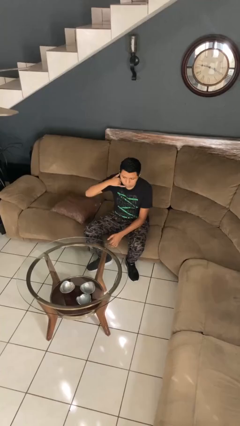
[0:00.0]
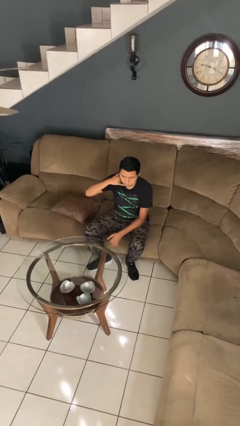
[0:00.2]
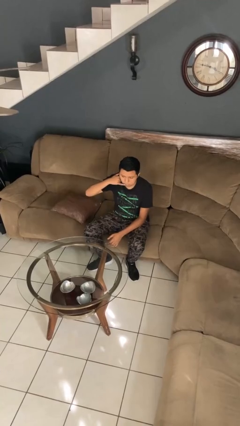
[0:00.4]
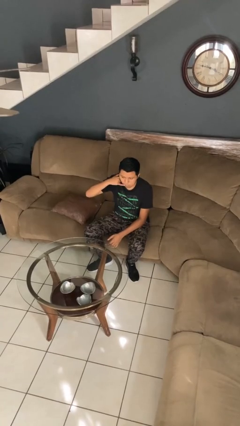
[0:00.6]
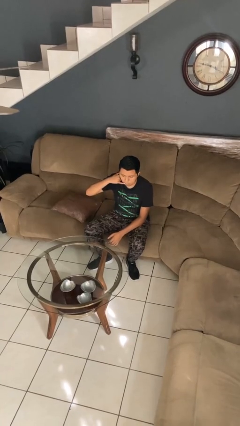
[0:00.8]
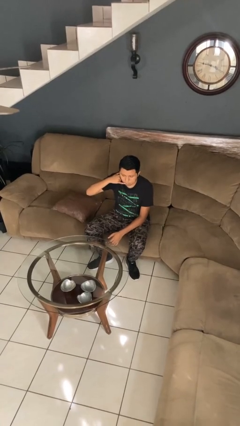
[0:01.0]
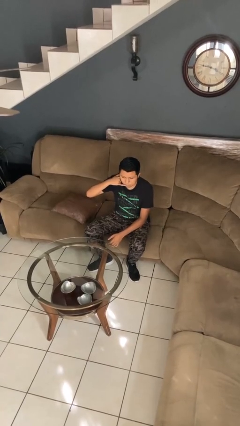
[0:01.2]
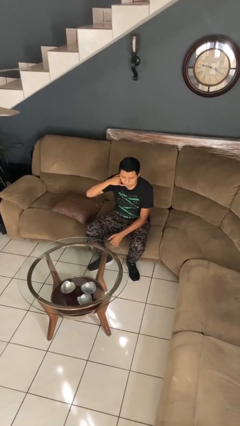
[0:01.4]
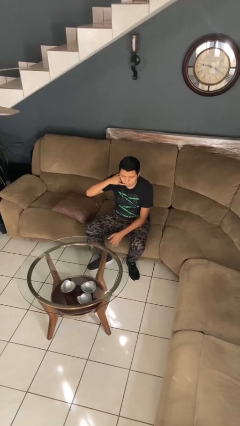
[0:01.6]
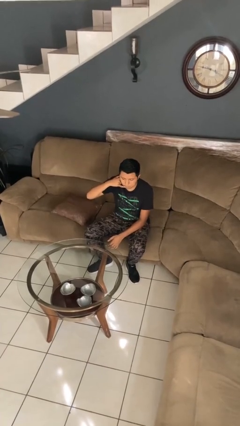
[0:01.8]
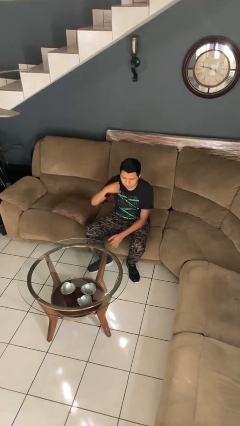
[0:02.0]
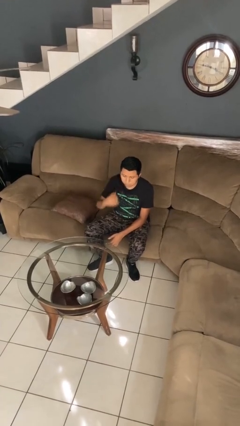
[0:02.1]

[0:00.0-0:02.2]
person gestures call me

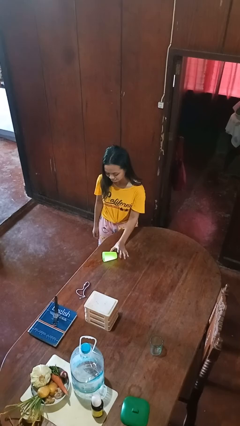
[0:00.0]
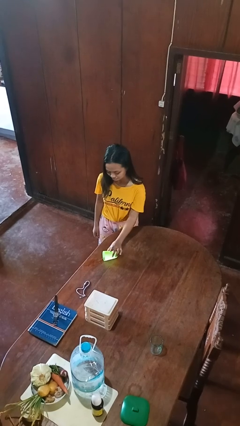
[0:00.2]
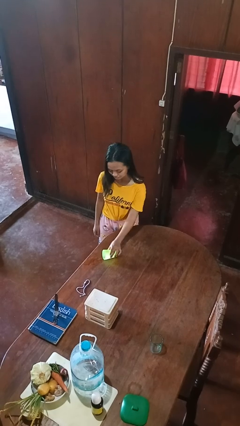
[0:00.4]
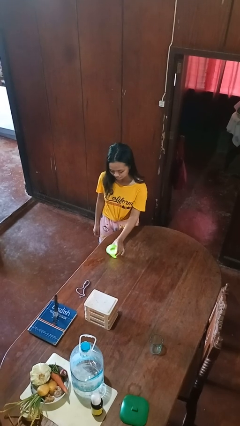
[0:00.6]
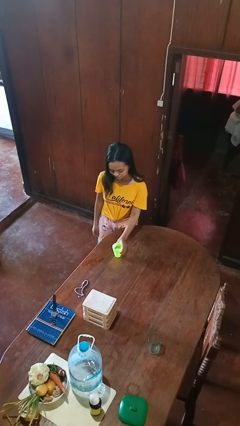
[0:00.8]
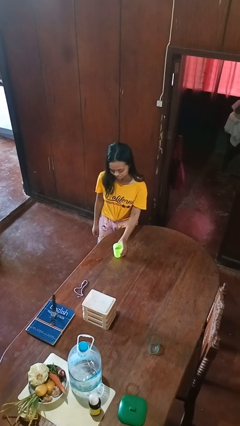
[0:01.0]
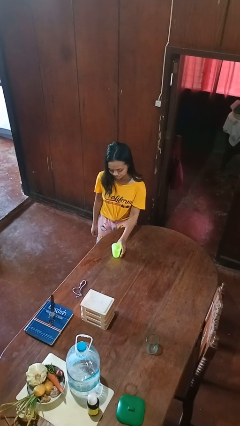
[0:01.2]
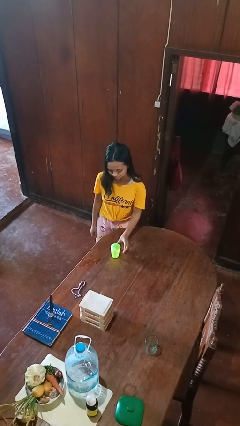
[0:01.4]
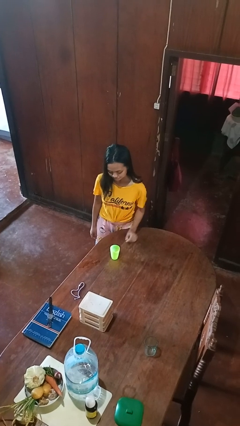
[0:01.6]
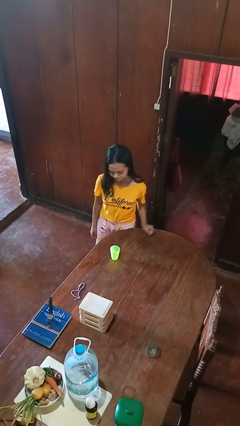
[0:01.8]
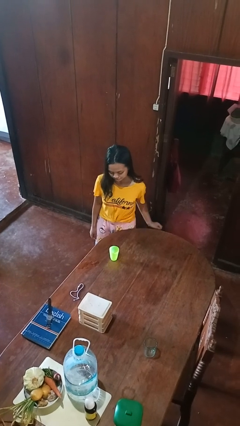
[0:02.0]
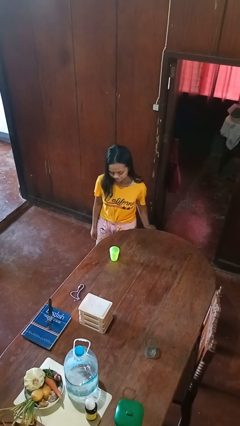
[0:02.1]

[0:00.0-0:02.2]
person sets upright glass

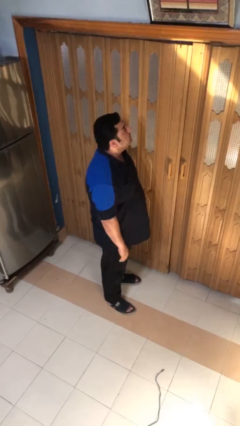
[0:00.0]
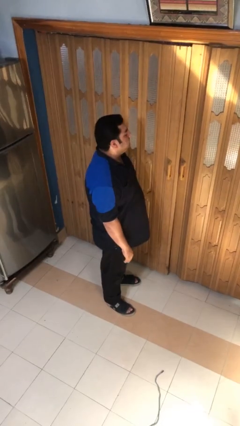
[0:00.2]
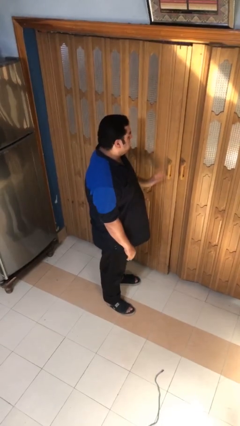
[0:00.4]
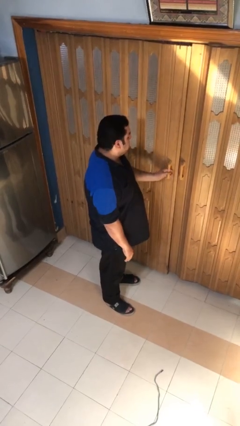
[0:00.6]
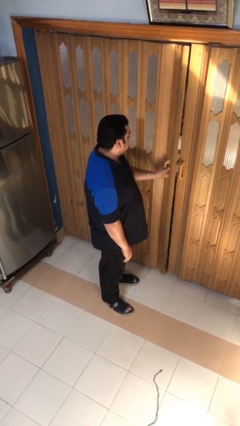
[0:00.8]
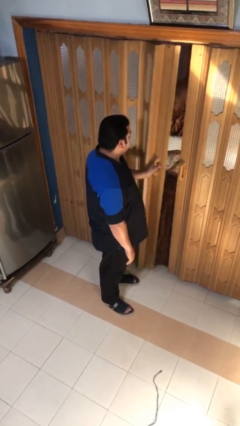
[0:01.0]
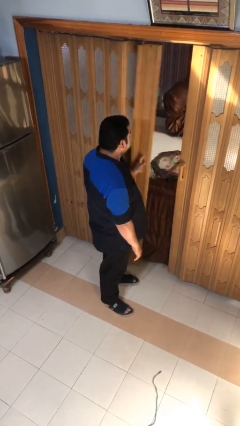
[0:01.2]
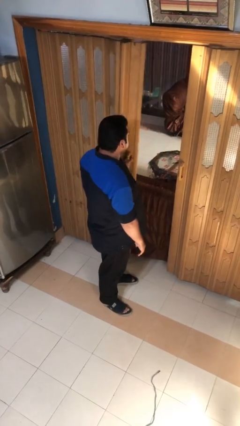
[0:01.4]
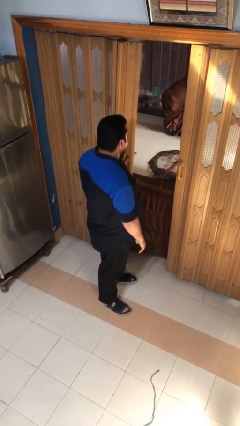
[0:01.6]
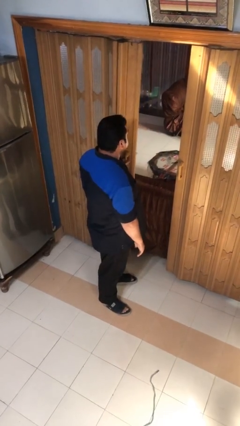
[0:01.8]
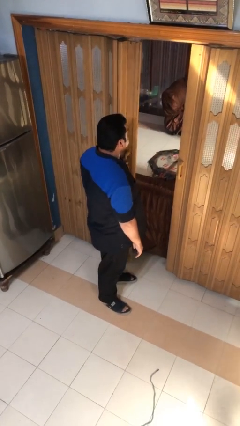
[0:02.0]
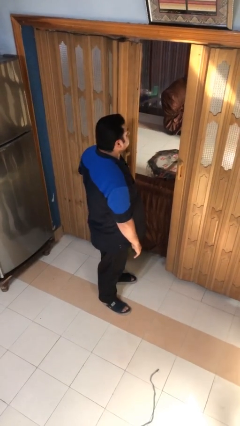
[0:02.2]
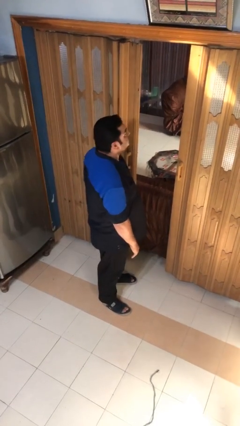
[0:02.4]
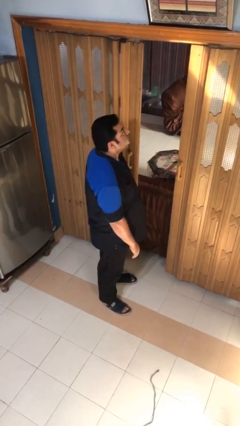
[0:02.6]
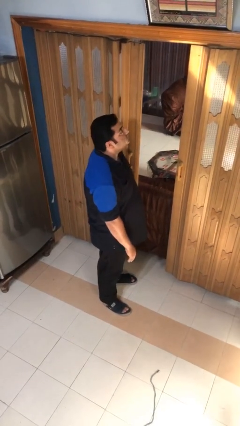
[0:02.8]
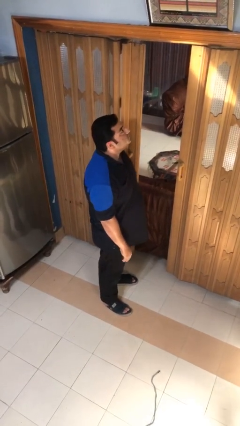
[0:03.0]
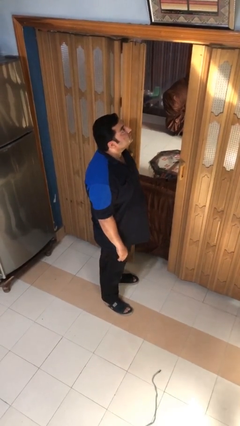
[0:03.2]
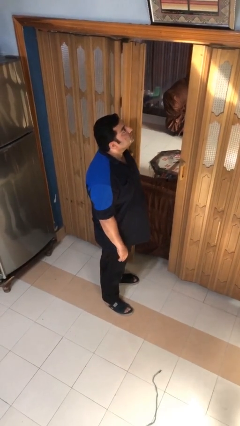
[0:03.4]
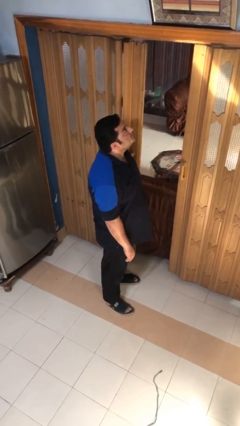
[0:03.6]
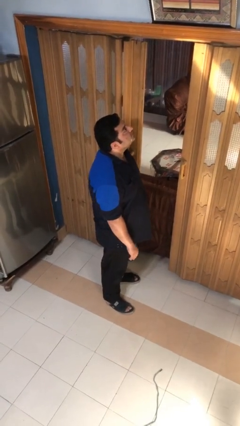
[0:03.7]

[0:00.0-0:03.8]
person opens sliding door

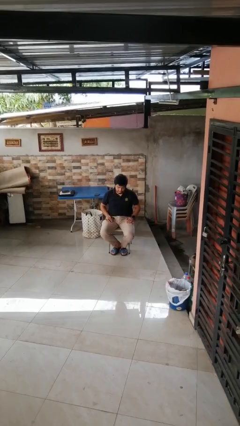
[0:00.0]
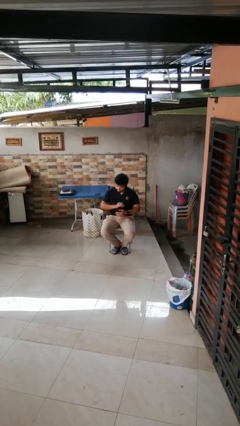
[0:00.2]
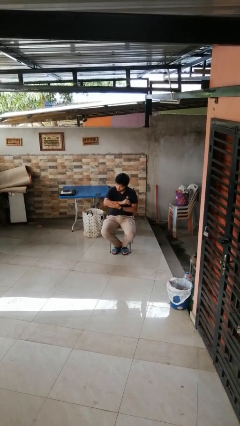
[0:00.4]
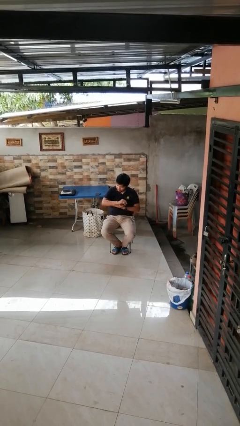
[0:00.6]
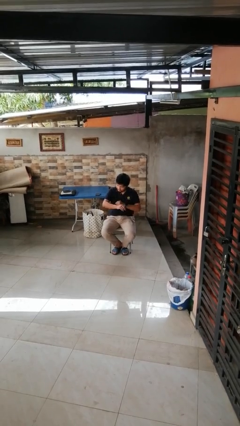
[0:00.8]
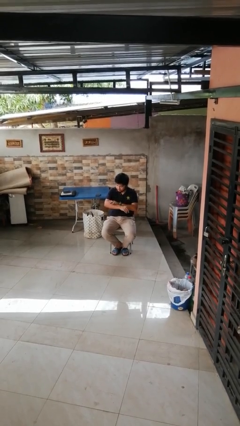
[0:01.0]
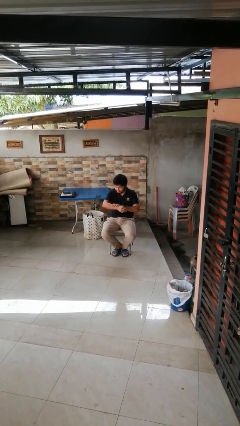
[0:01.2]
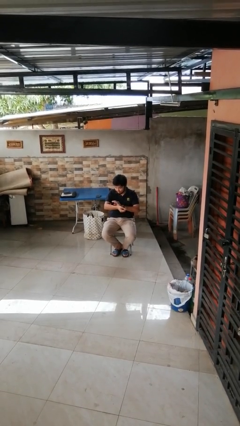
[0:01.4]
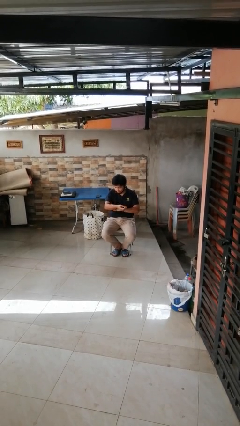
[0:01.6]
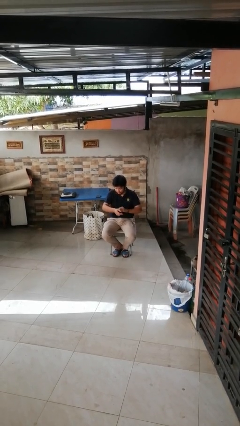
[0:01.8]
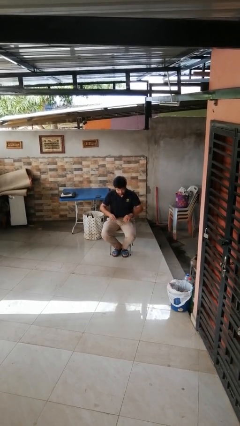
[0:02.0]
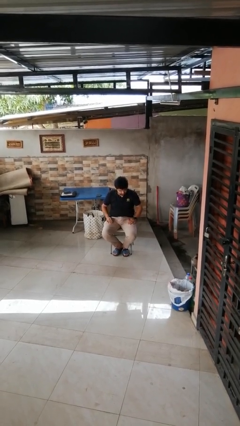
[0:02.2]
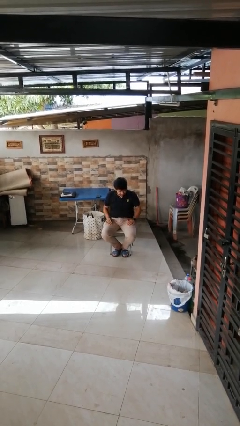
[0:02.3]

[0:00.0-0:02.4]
person looks at hands in lap

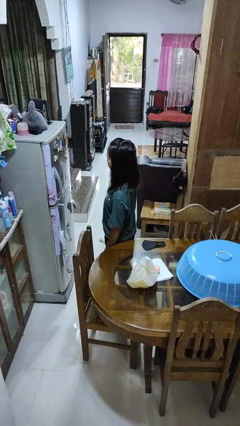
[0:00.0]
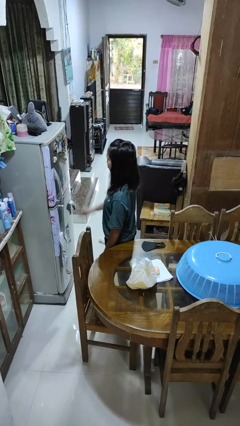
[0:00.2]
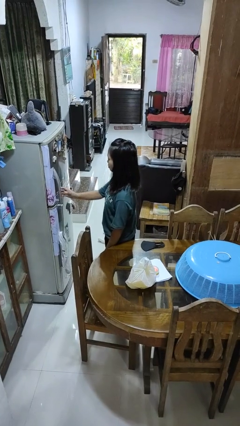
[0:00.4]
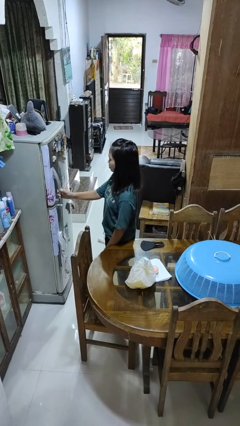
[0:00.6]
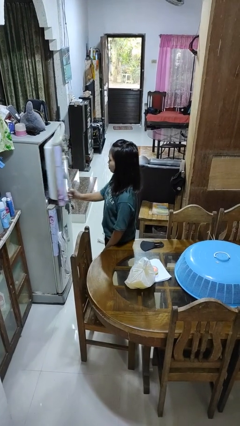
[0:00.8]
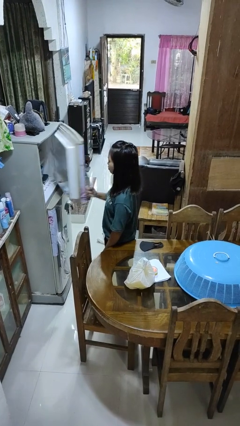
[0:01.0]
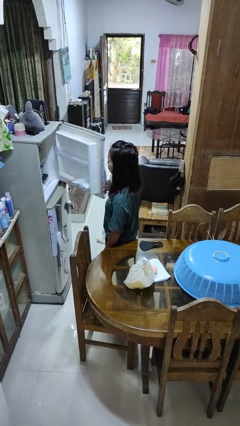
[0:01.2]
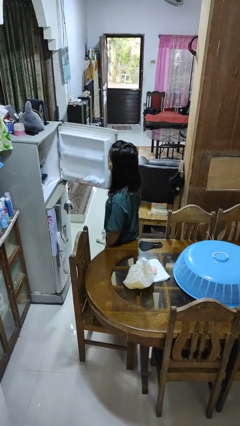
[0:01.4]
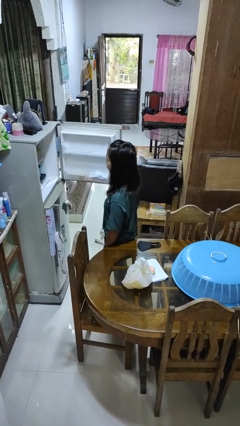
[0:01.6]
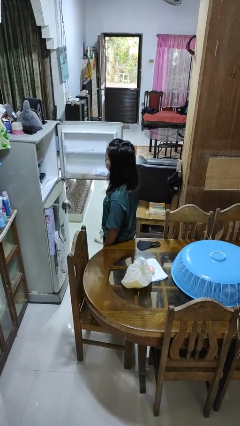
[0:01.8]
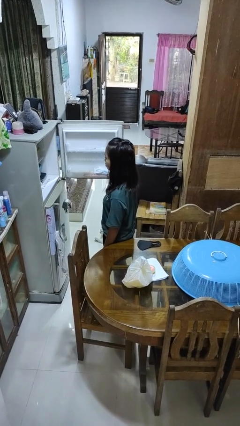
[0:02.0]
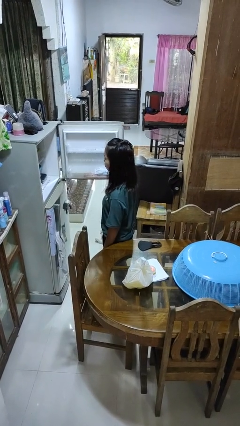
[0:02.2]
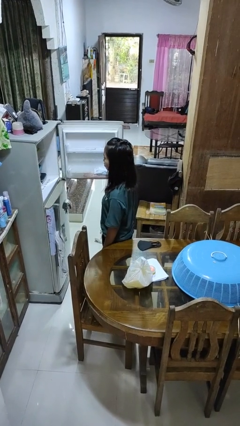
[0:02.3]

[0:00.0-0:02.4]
person opens refrigerator

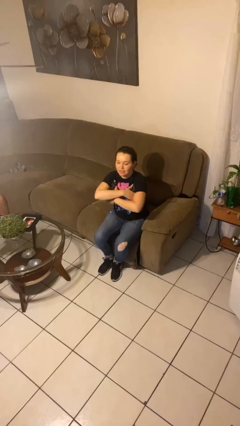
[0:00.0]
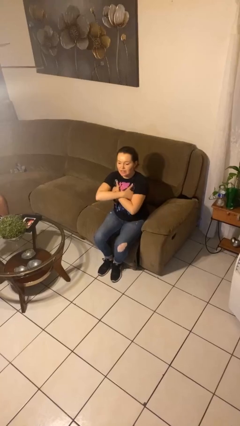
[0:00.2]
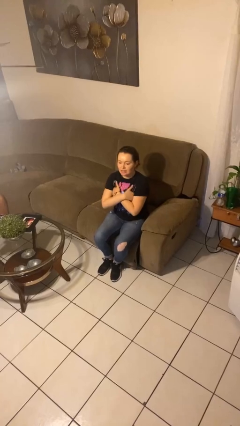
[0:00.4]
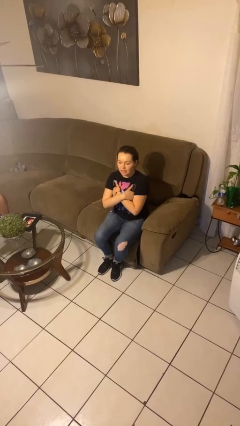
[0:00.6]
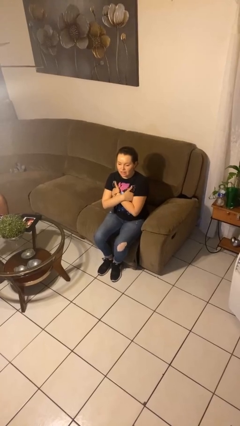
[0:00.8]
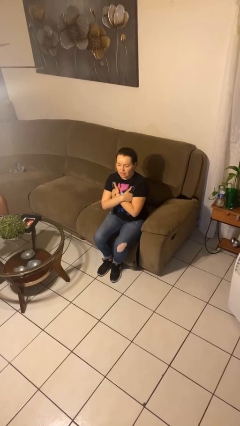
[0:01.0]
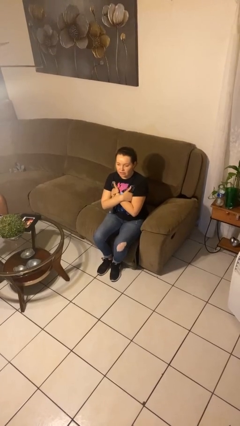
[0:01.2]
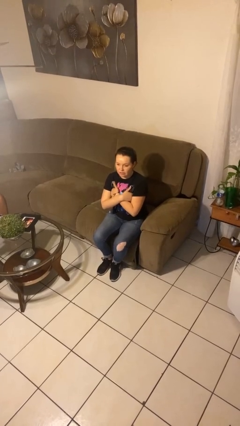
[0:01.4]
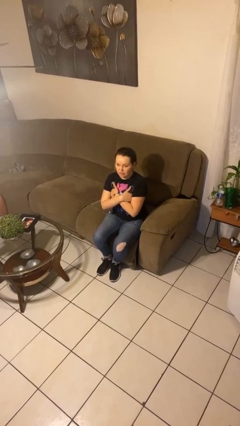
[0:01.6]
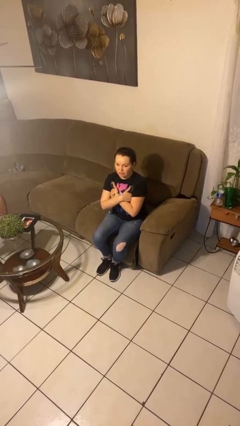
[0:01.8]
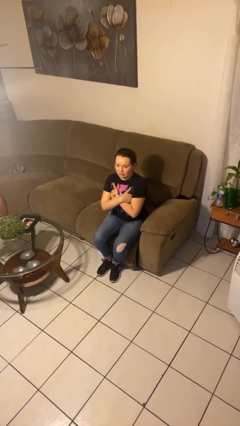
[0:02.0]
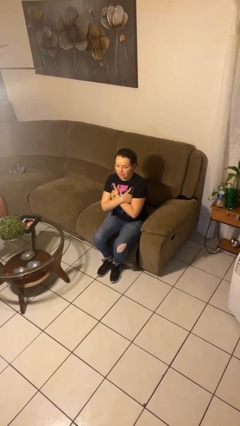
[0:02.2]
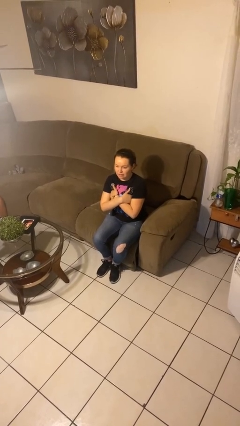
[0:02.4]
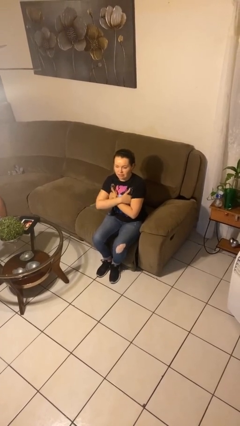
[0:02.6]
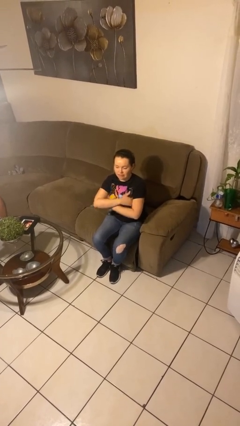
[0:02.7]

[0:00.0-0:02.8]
person gestures arms x

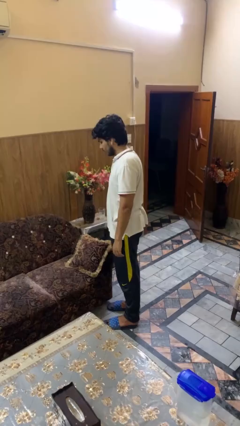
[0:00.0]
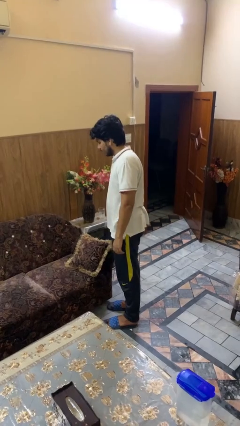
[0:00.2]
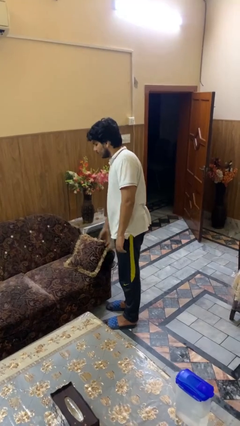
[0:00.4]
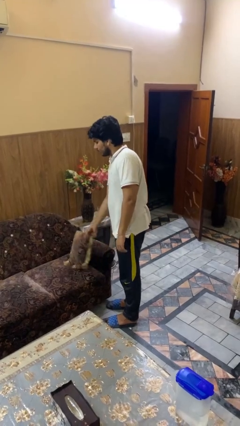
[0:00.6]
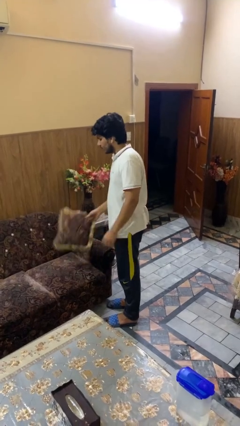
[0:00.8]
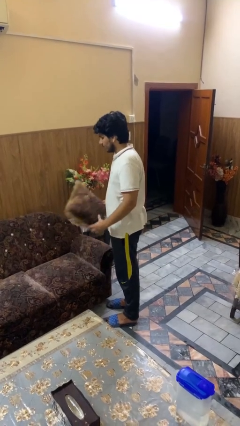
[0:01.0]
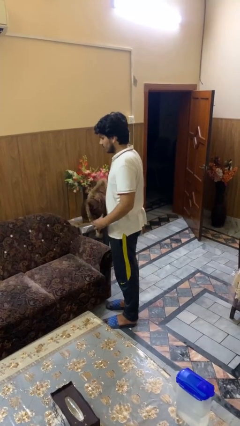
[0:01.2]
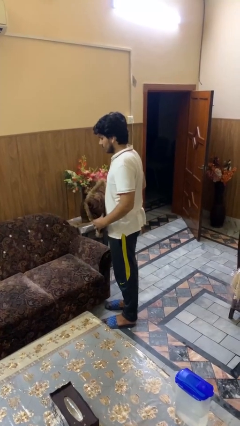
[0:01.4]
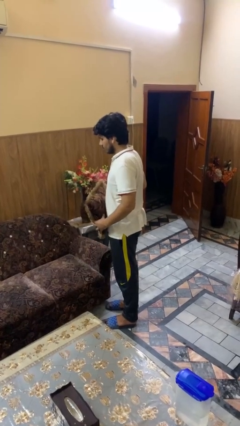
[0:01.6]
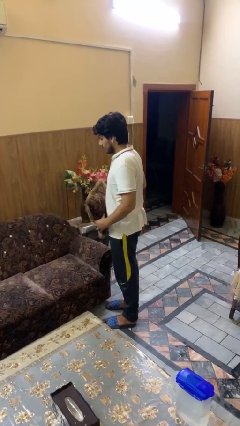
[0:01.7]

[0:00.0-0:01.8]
person picks up object from couch
